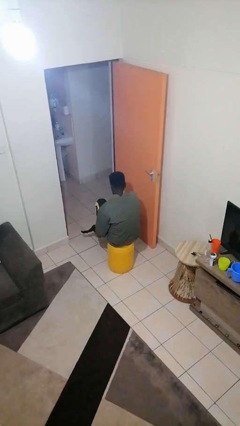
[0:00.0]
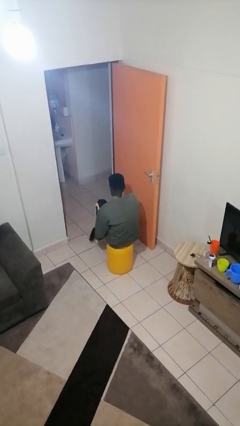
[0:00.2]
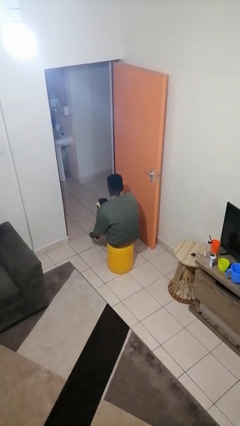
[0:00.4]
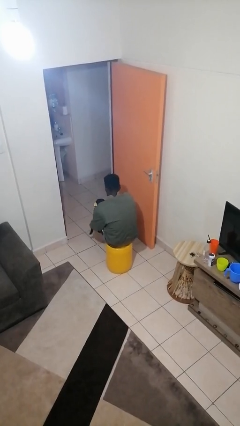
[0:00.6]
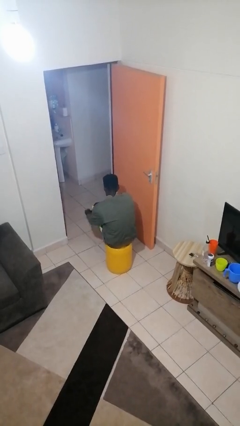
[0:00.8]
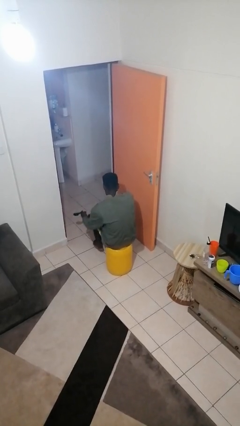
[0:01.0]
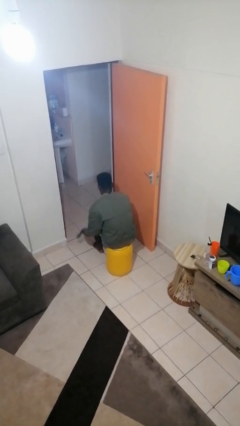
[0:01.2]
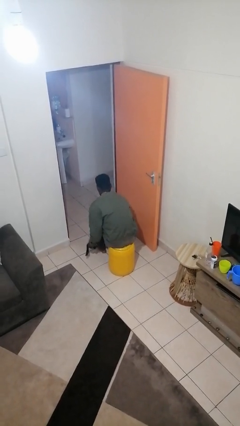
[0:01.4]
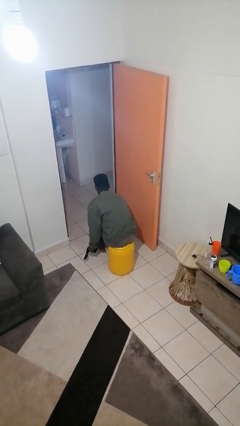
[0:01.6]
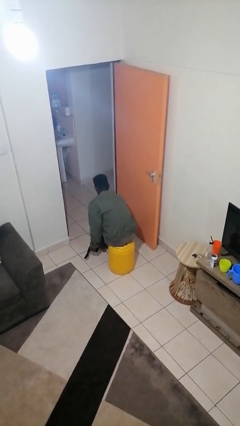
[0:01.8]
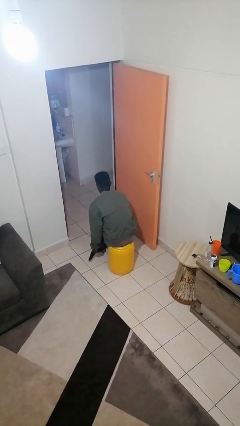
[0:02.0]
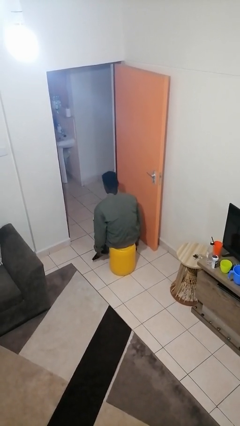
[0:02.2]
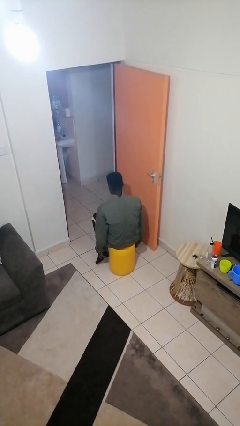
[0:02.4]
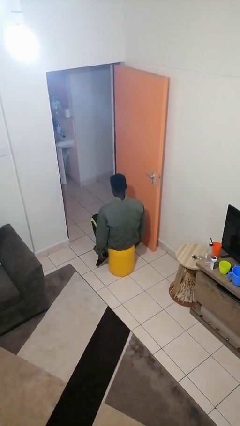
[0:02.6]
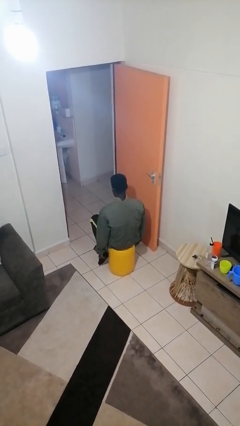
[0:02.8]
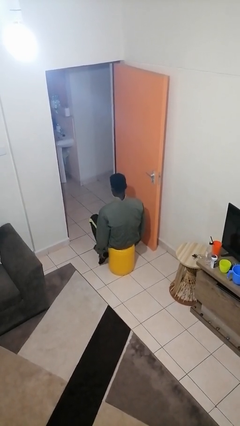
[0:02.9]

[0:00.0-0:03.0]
person takes off socks

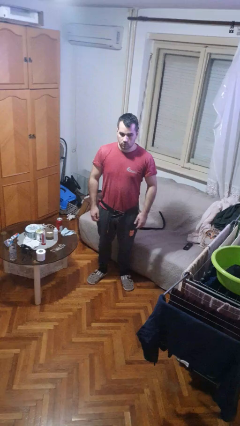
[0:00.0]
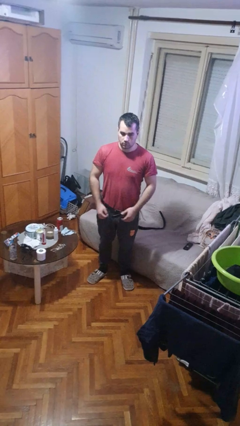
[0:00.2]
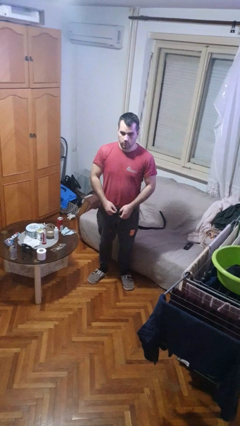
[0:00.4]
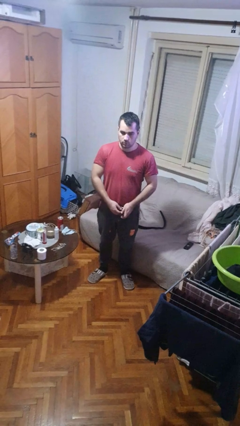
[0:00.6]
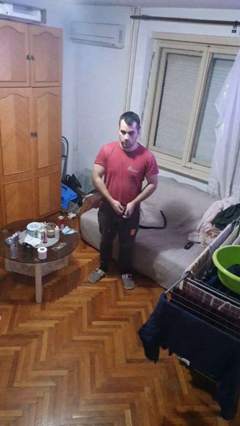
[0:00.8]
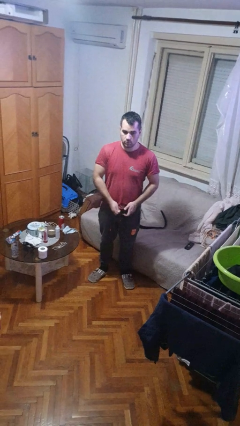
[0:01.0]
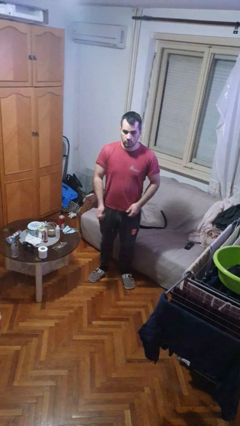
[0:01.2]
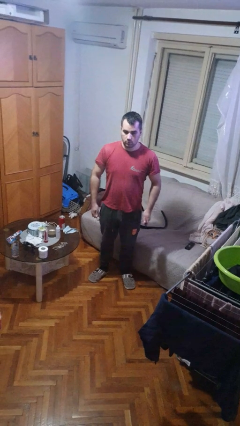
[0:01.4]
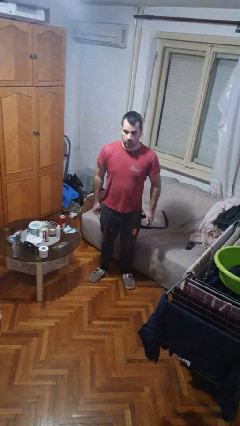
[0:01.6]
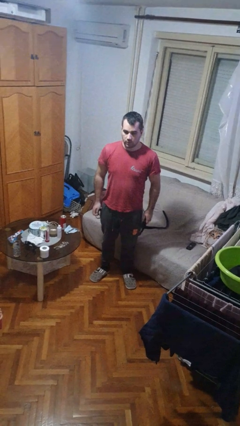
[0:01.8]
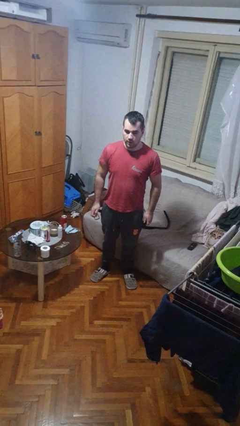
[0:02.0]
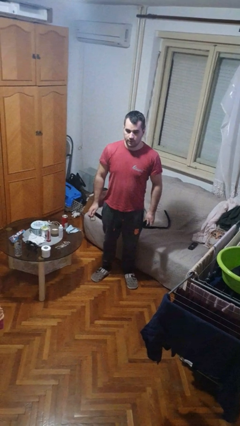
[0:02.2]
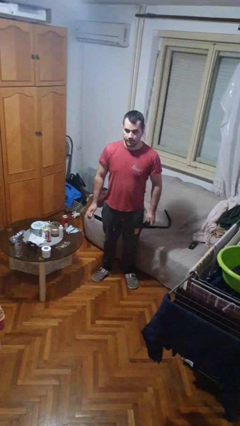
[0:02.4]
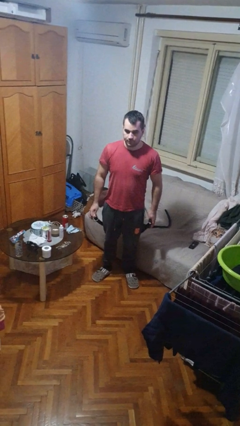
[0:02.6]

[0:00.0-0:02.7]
person takes off belt

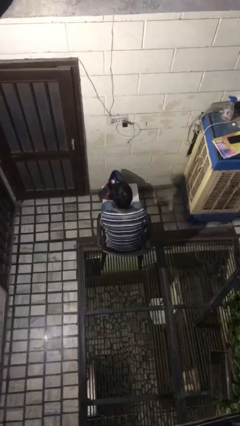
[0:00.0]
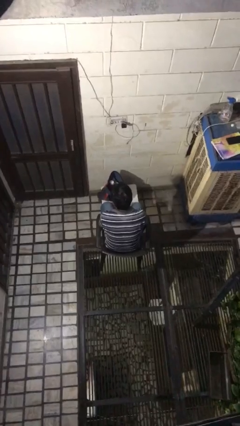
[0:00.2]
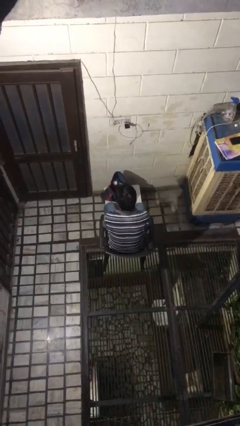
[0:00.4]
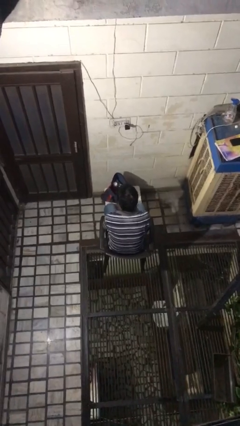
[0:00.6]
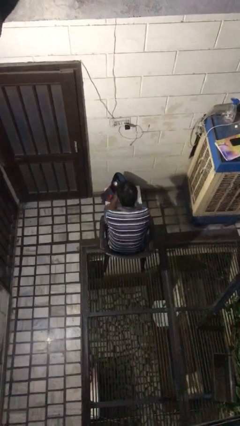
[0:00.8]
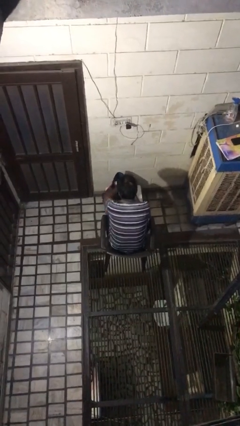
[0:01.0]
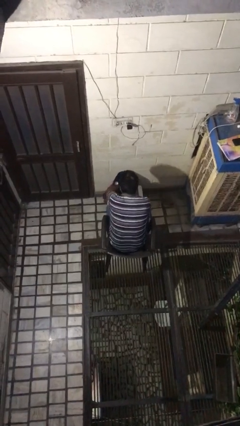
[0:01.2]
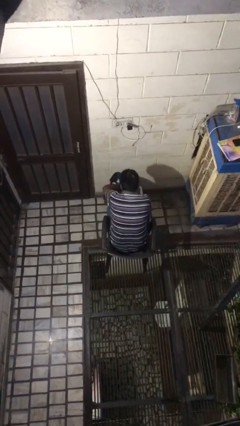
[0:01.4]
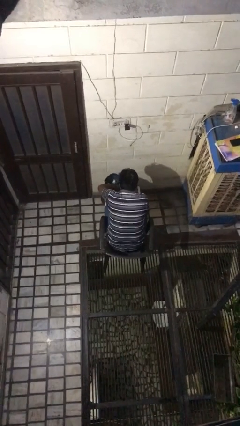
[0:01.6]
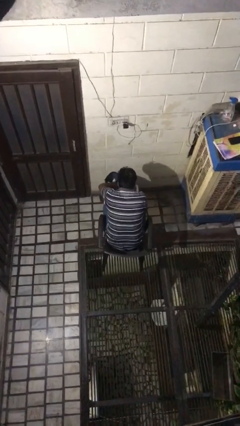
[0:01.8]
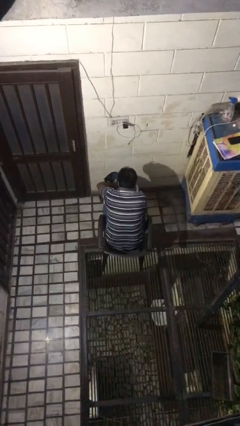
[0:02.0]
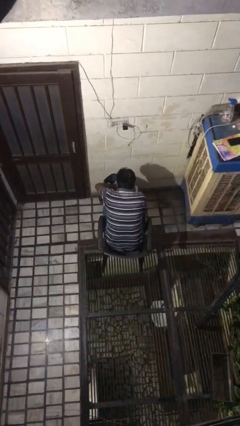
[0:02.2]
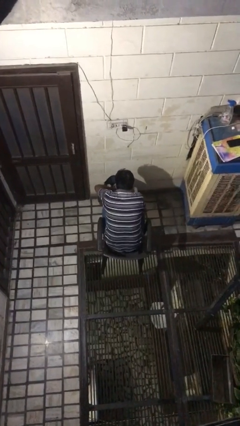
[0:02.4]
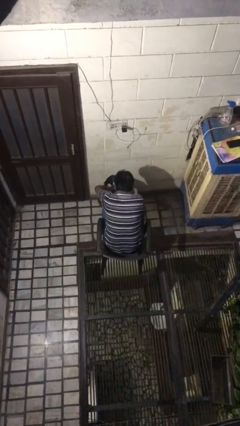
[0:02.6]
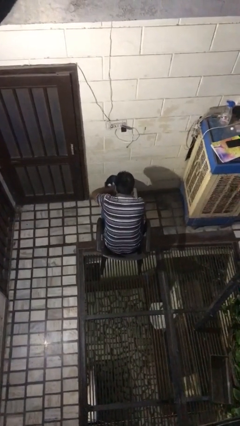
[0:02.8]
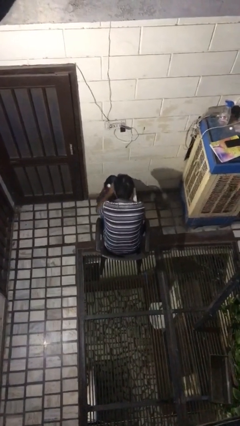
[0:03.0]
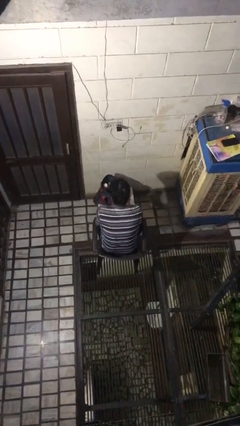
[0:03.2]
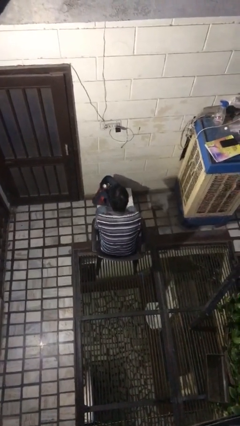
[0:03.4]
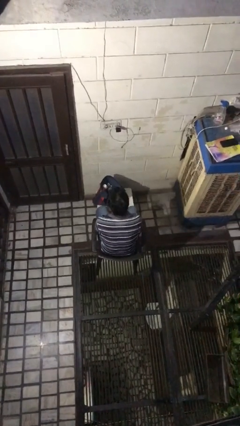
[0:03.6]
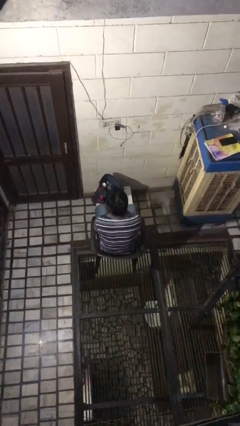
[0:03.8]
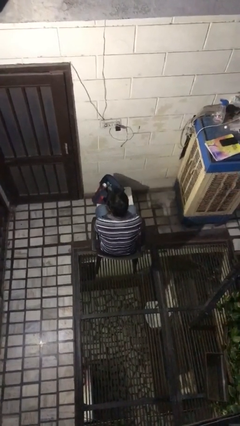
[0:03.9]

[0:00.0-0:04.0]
person searches in bag

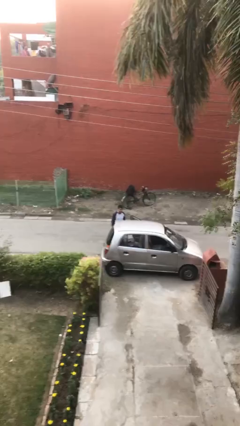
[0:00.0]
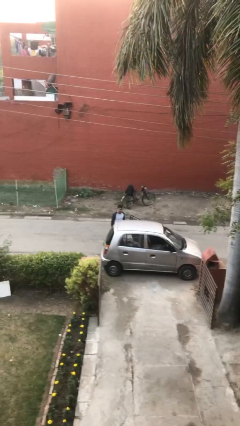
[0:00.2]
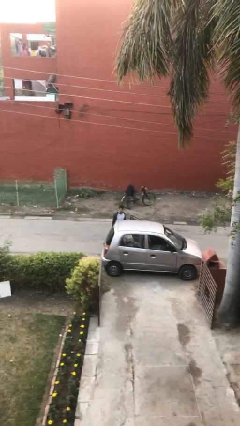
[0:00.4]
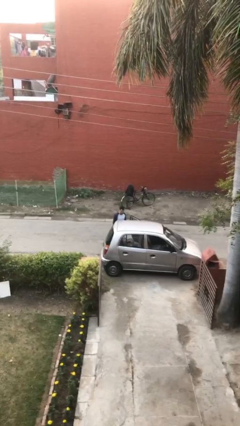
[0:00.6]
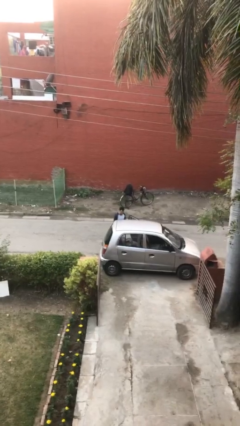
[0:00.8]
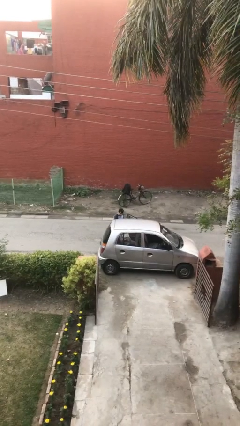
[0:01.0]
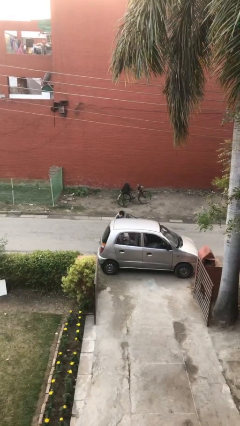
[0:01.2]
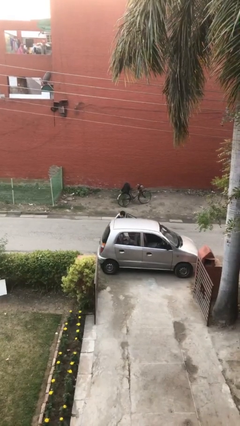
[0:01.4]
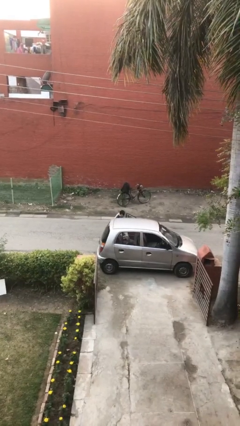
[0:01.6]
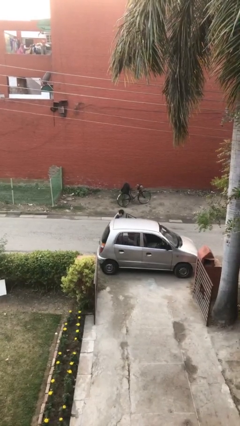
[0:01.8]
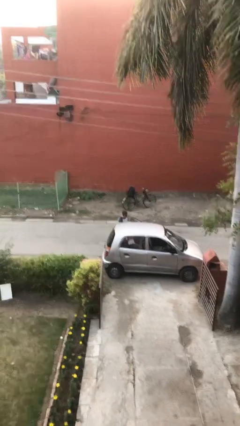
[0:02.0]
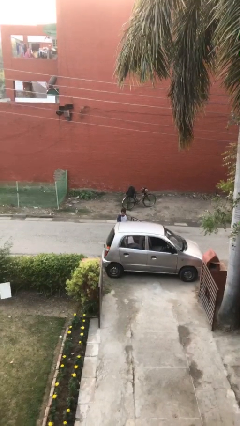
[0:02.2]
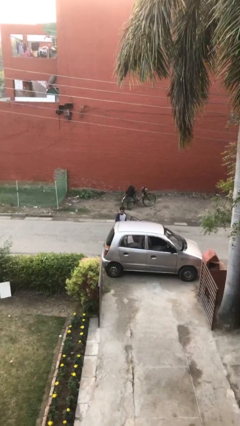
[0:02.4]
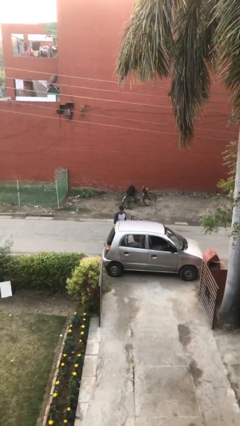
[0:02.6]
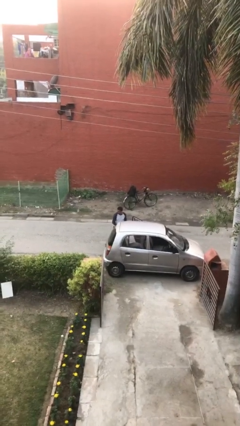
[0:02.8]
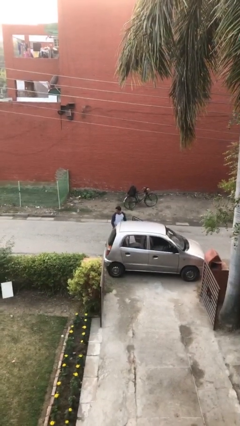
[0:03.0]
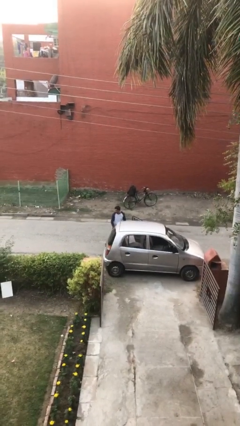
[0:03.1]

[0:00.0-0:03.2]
person unloads car

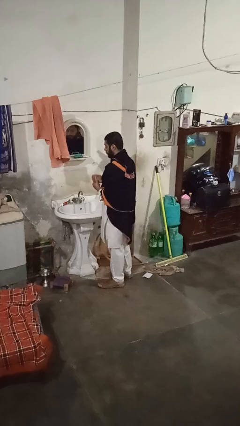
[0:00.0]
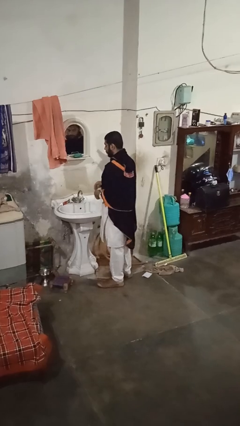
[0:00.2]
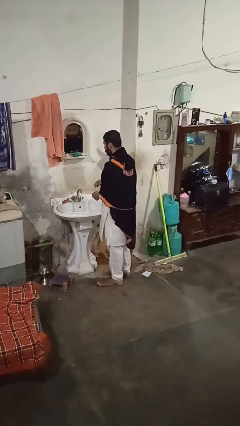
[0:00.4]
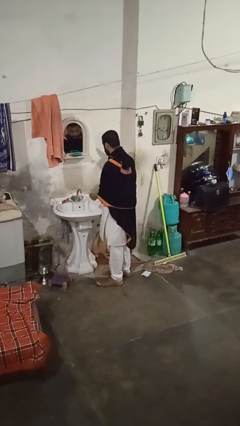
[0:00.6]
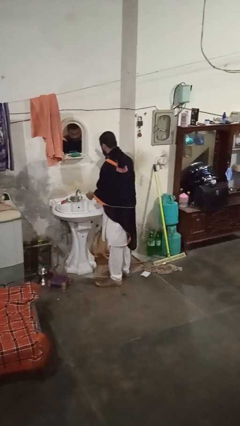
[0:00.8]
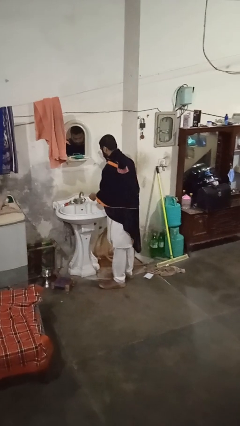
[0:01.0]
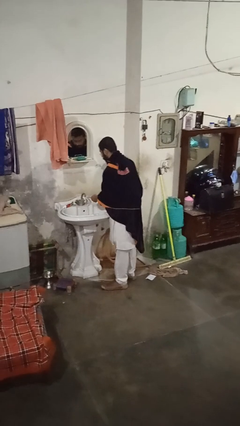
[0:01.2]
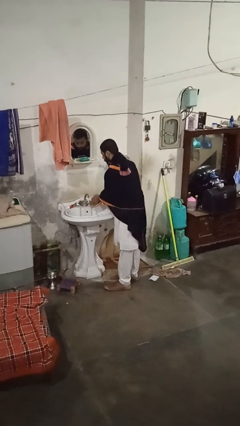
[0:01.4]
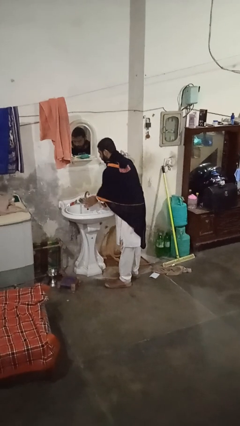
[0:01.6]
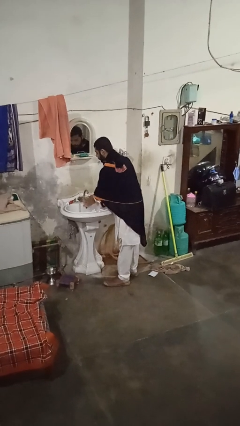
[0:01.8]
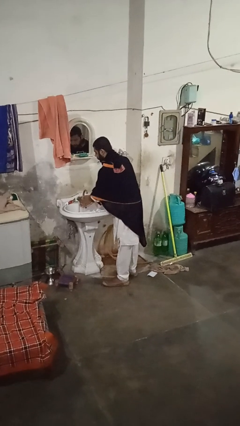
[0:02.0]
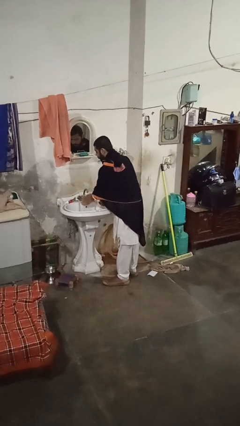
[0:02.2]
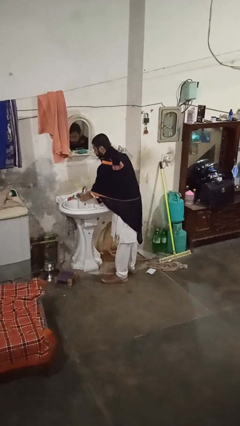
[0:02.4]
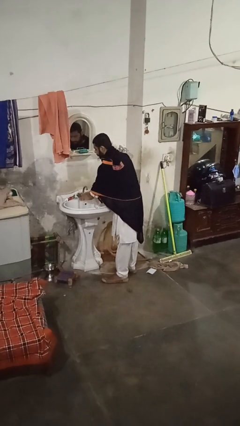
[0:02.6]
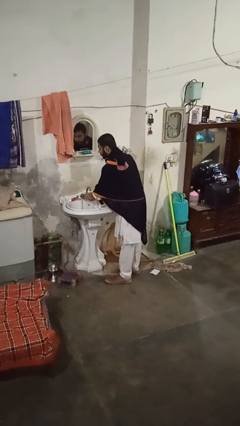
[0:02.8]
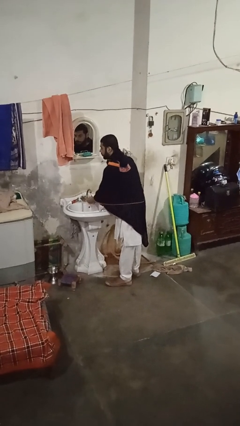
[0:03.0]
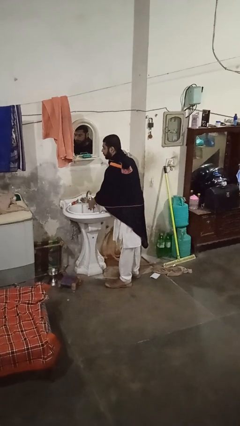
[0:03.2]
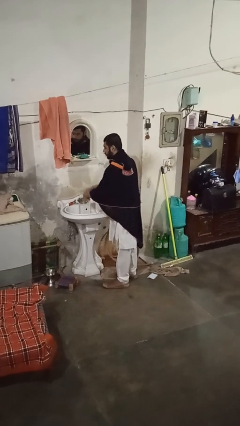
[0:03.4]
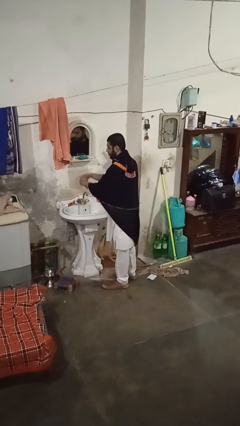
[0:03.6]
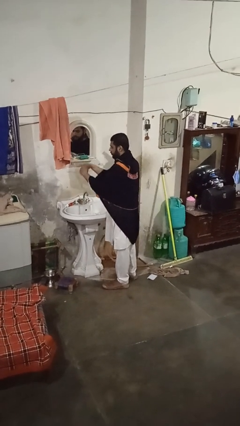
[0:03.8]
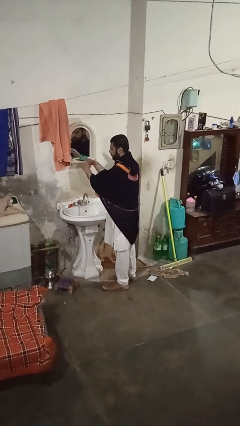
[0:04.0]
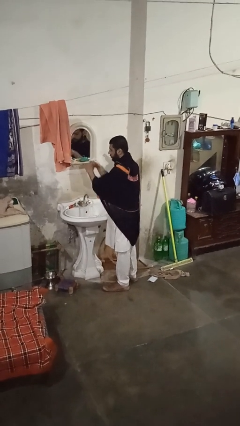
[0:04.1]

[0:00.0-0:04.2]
person washes hands

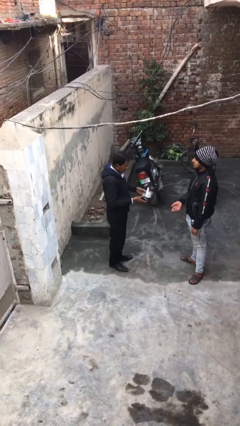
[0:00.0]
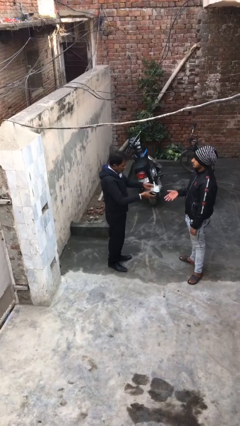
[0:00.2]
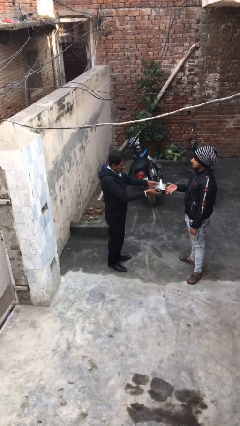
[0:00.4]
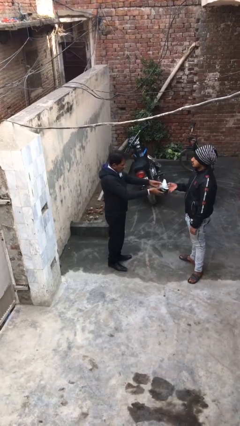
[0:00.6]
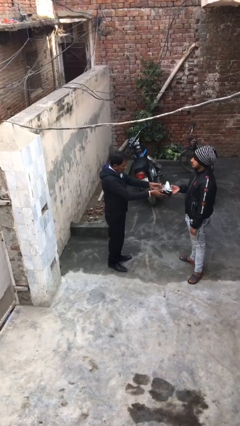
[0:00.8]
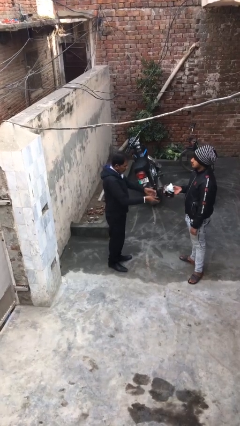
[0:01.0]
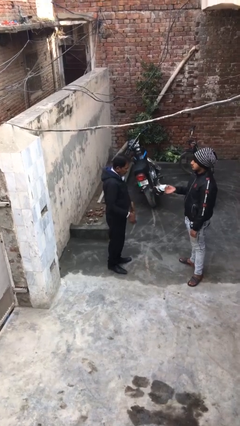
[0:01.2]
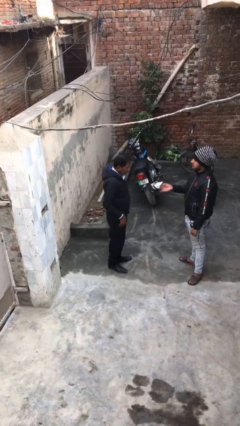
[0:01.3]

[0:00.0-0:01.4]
person transfers object to person
